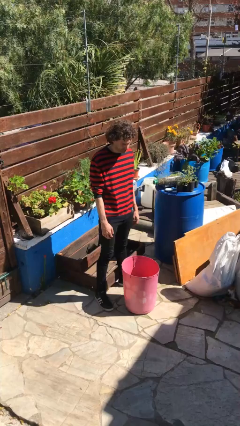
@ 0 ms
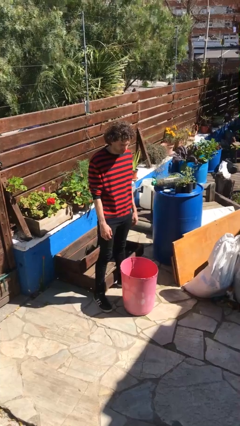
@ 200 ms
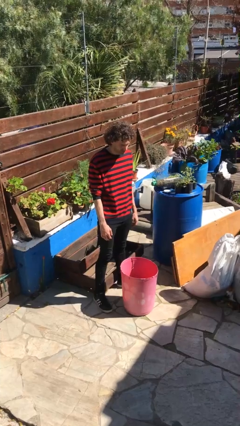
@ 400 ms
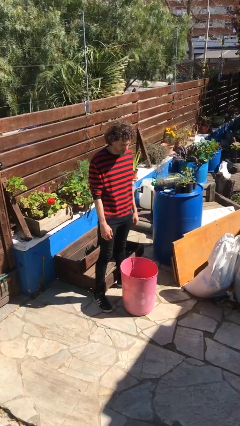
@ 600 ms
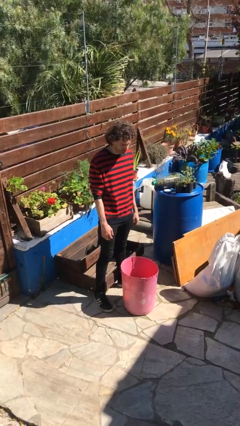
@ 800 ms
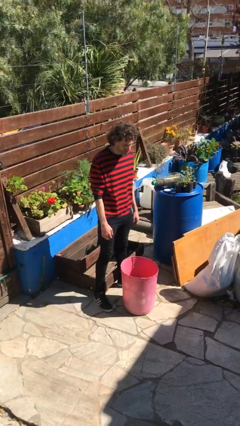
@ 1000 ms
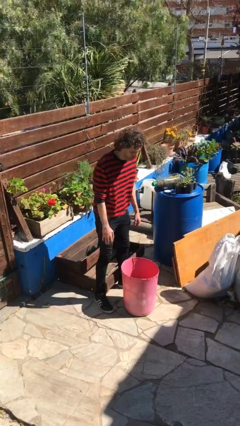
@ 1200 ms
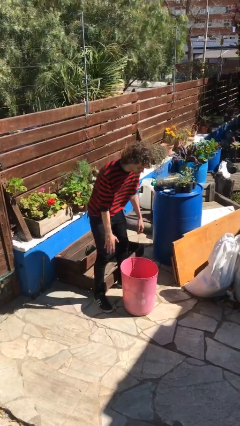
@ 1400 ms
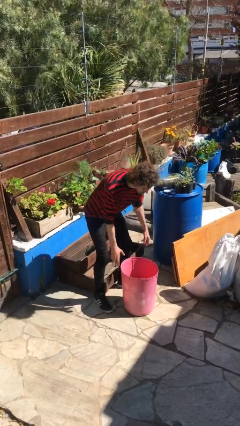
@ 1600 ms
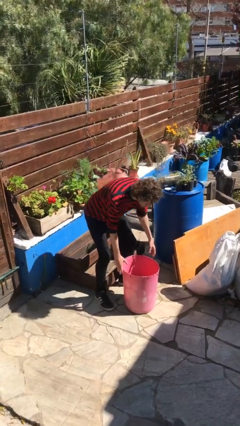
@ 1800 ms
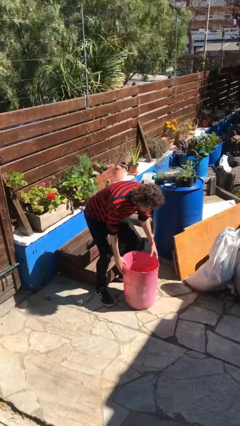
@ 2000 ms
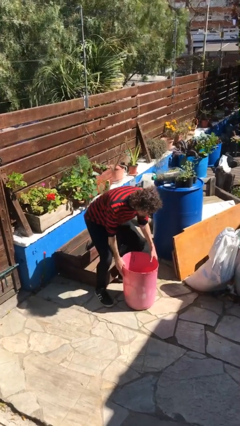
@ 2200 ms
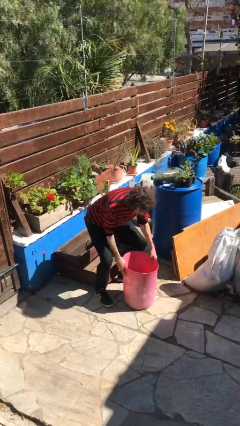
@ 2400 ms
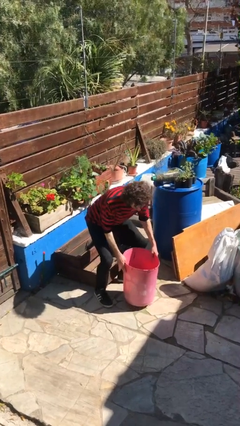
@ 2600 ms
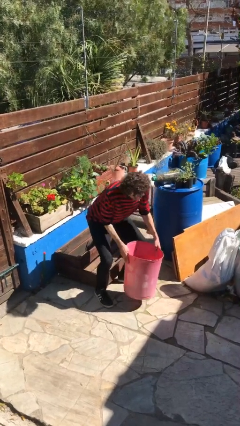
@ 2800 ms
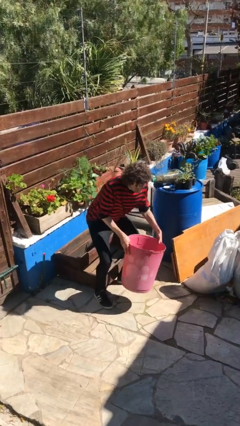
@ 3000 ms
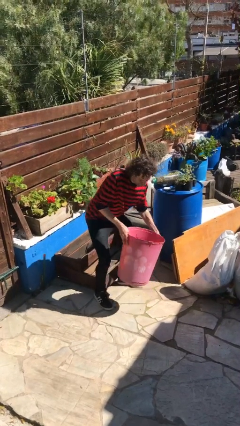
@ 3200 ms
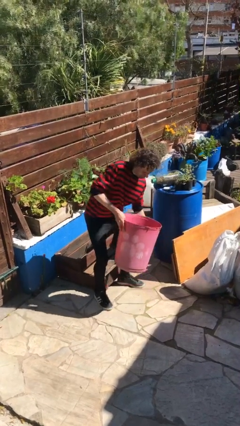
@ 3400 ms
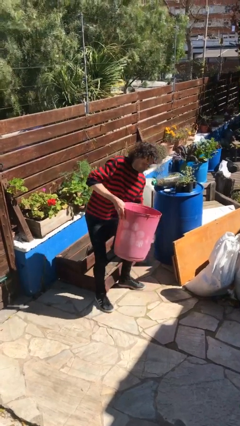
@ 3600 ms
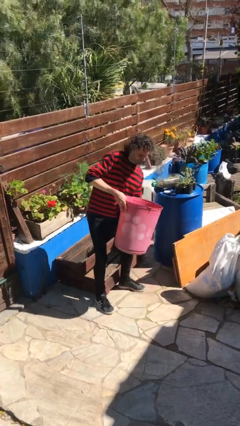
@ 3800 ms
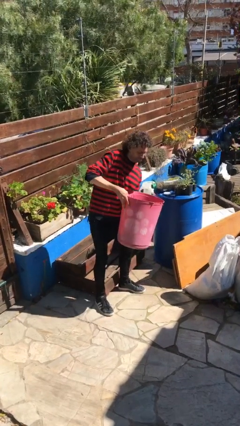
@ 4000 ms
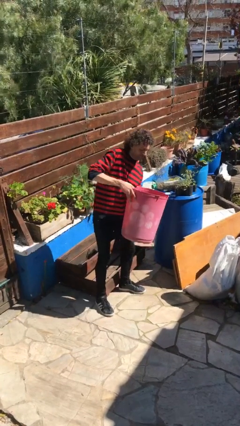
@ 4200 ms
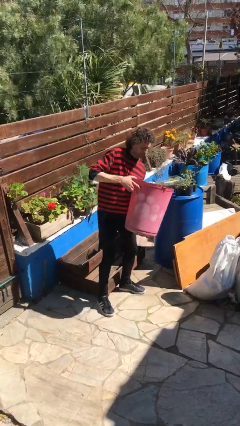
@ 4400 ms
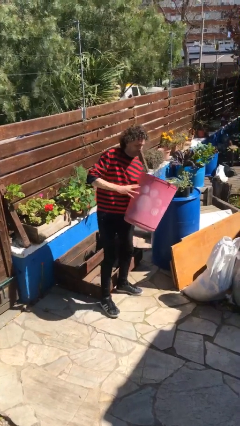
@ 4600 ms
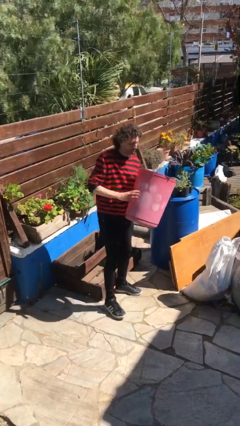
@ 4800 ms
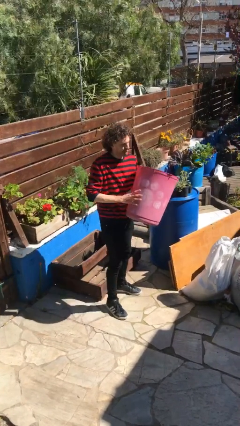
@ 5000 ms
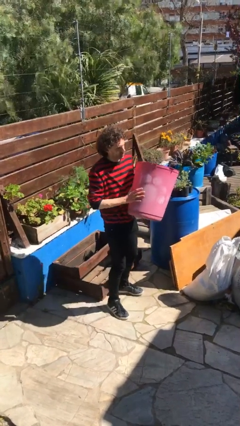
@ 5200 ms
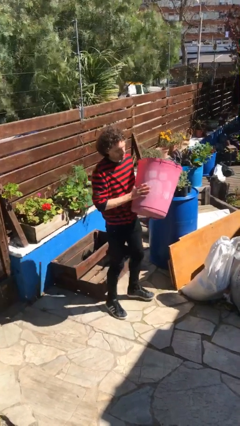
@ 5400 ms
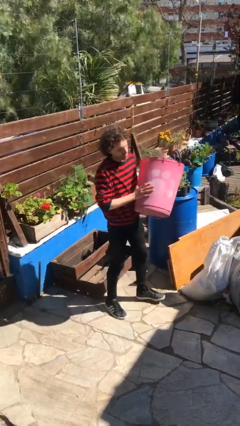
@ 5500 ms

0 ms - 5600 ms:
person picks up object from floor

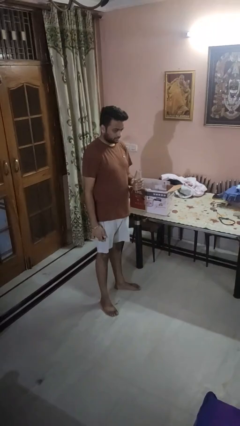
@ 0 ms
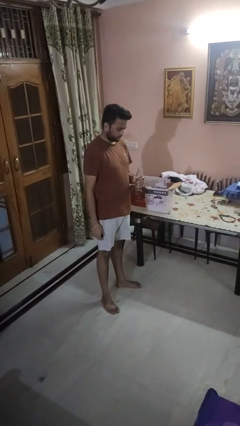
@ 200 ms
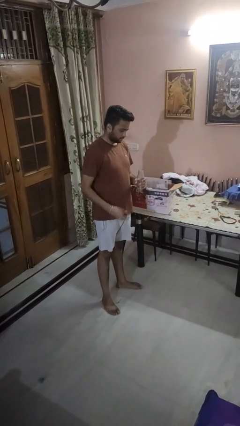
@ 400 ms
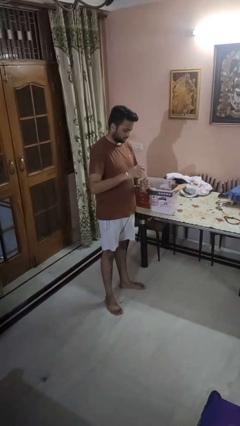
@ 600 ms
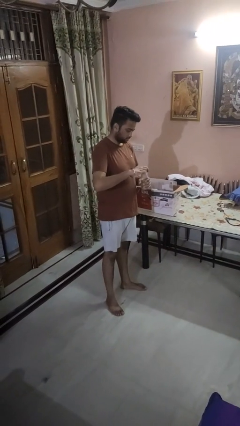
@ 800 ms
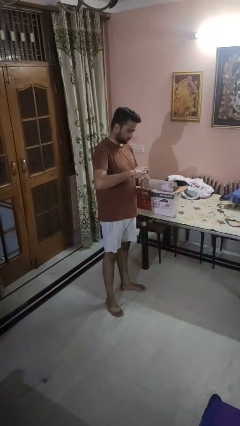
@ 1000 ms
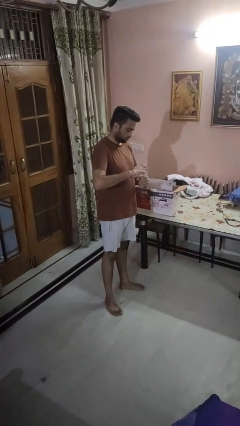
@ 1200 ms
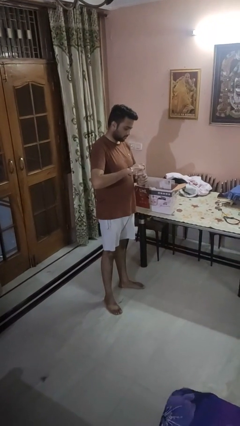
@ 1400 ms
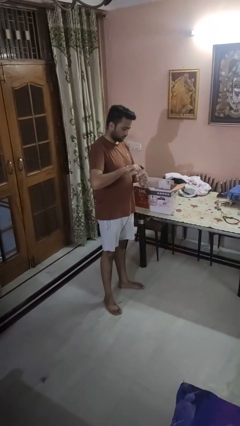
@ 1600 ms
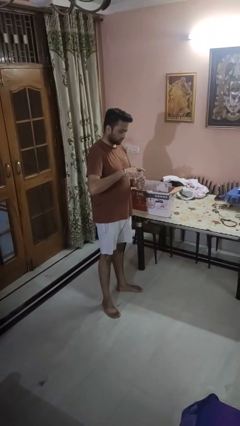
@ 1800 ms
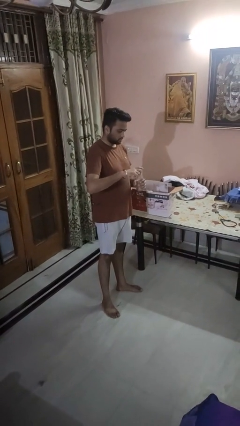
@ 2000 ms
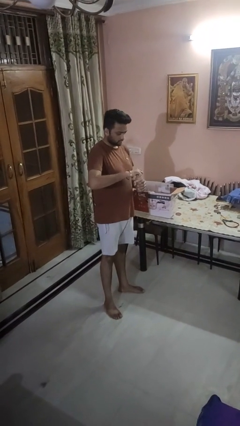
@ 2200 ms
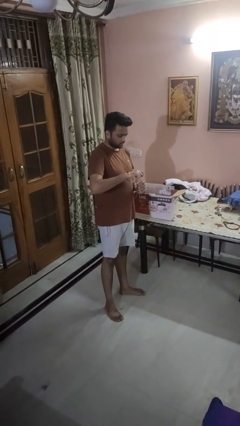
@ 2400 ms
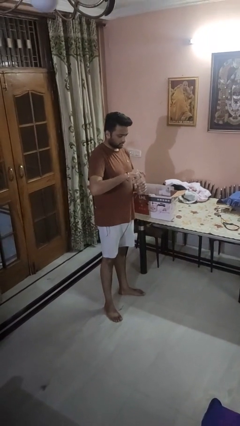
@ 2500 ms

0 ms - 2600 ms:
person screws lid to bottle

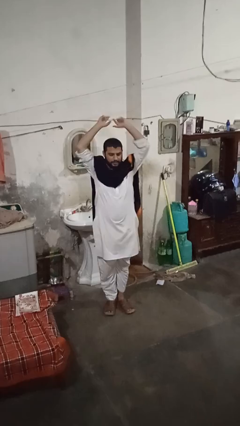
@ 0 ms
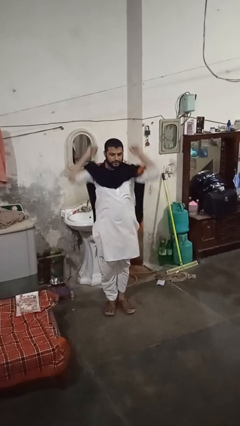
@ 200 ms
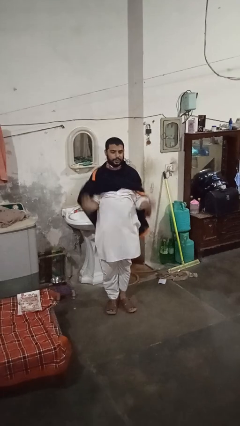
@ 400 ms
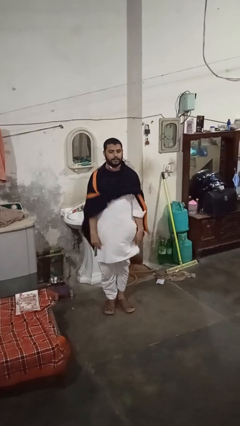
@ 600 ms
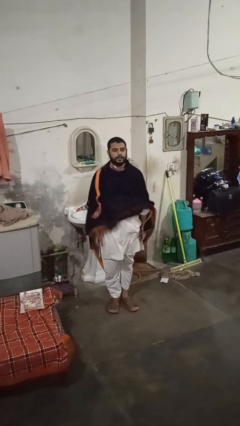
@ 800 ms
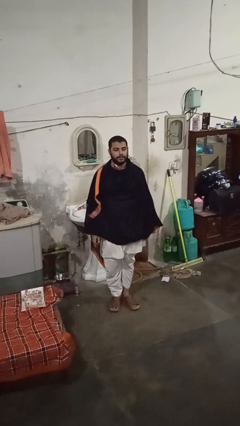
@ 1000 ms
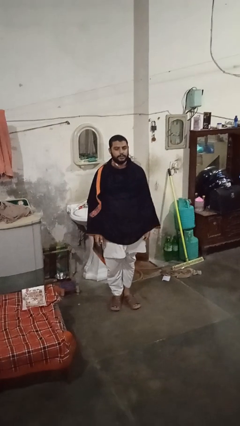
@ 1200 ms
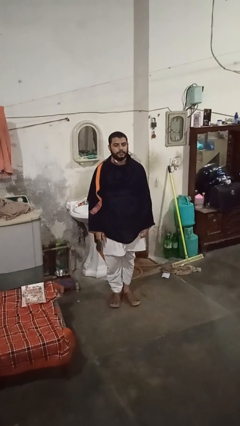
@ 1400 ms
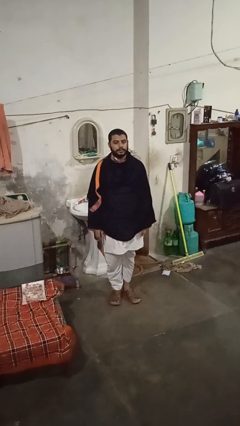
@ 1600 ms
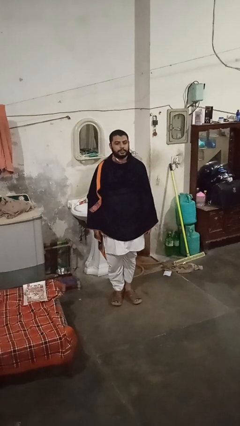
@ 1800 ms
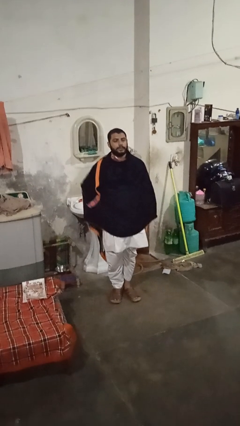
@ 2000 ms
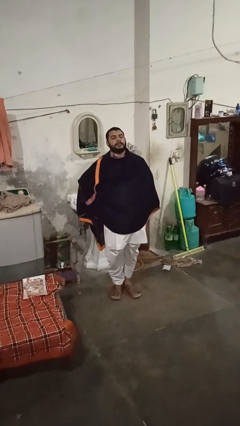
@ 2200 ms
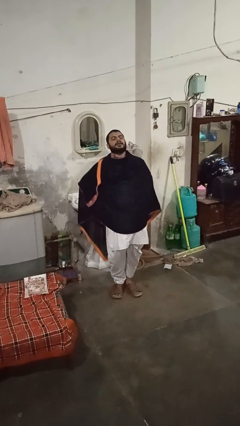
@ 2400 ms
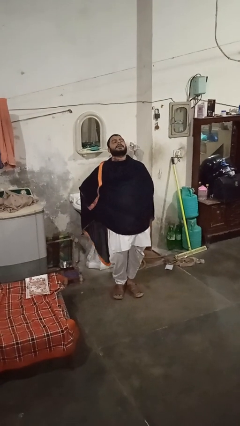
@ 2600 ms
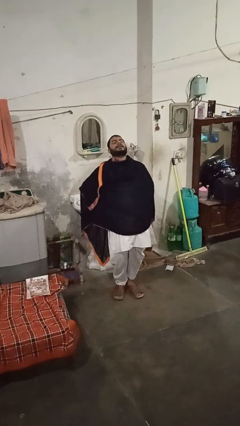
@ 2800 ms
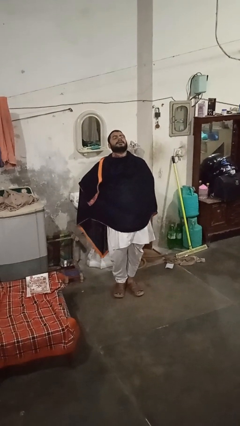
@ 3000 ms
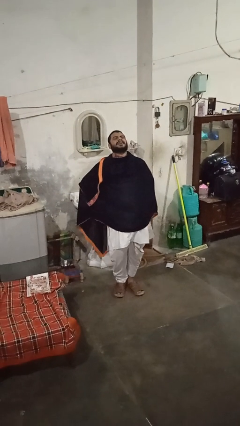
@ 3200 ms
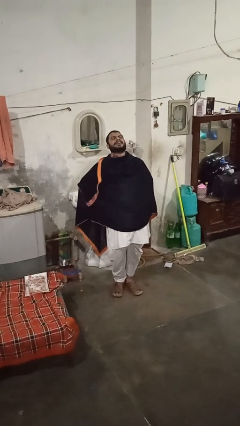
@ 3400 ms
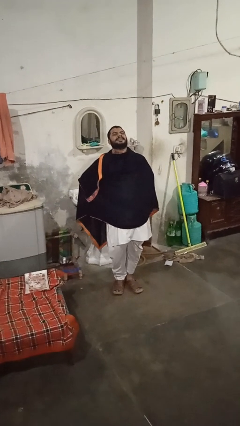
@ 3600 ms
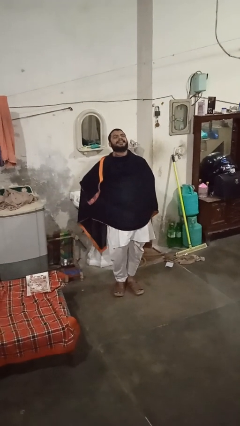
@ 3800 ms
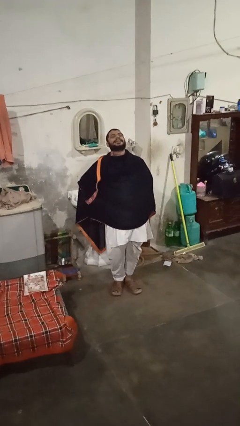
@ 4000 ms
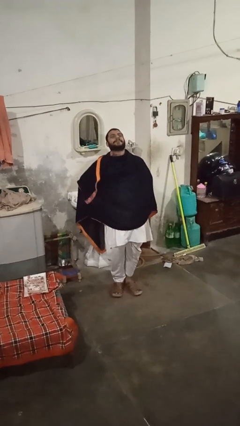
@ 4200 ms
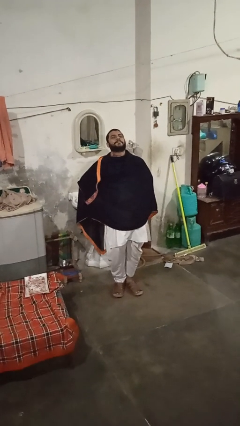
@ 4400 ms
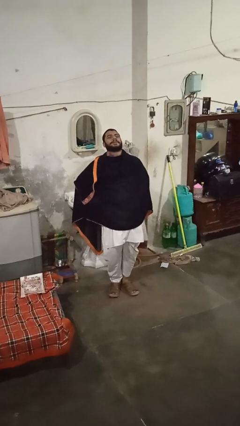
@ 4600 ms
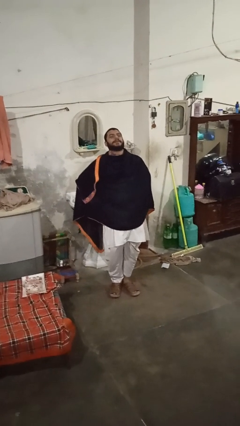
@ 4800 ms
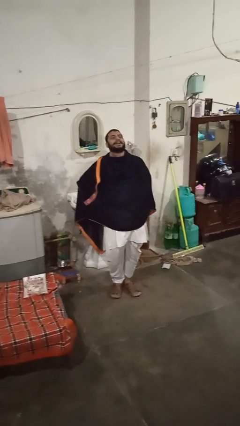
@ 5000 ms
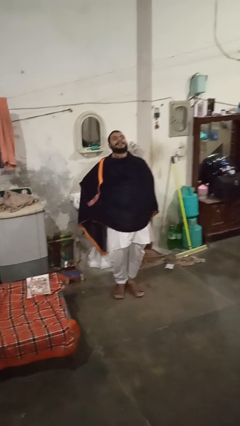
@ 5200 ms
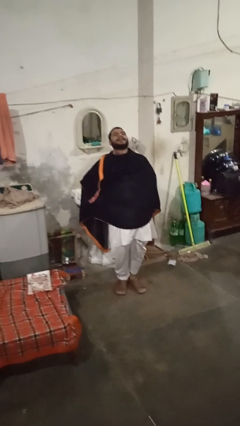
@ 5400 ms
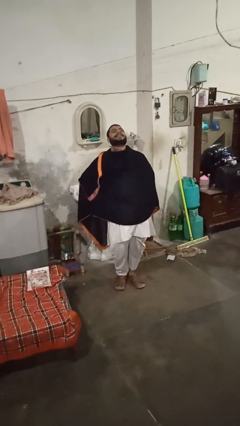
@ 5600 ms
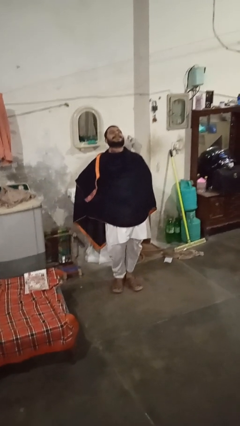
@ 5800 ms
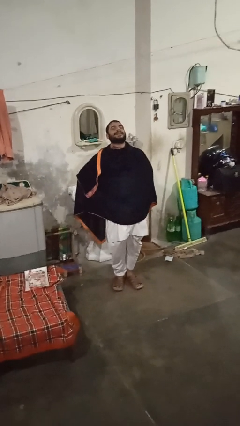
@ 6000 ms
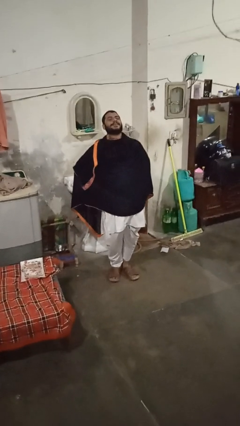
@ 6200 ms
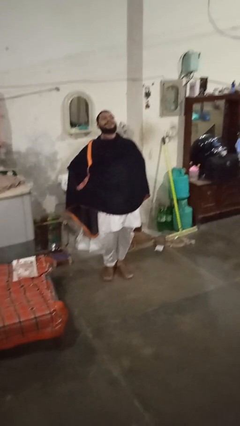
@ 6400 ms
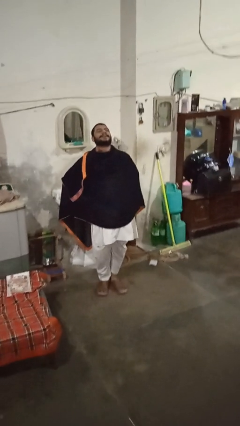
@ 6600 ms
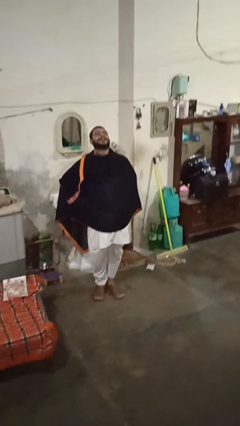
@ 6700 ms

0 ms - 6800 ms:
person stretches back

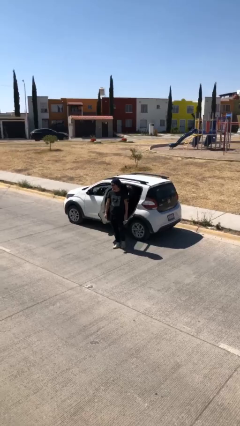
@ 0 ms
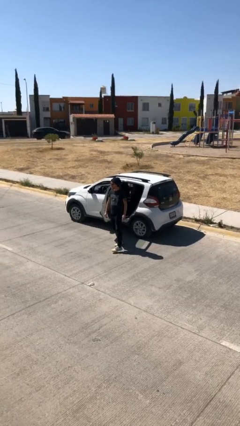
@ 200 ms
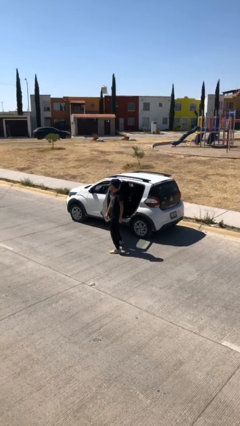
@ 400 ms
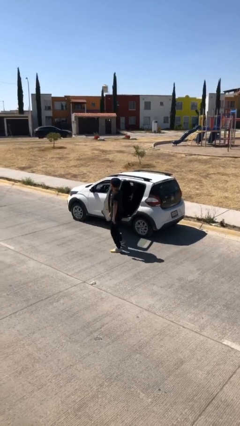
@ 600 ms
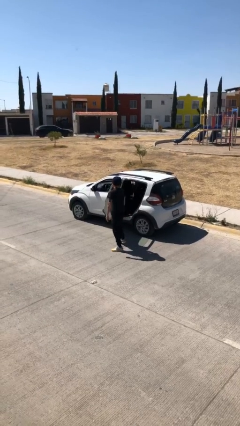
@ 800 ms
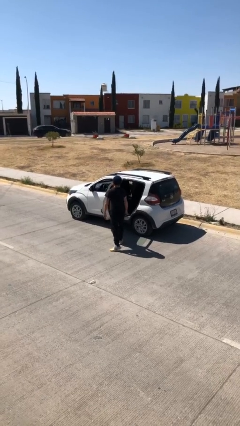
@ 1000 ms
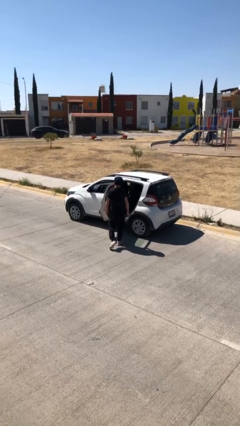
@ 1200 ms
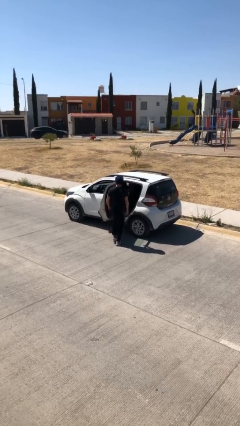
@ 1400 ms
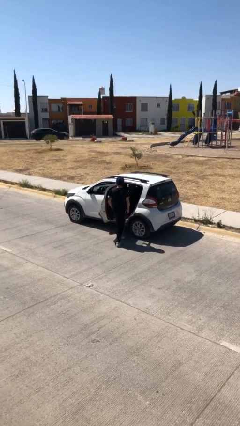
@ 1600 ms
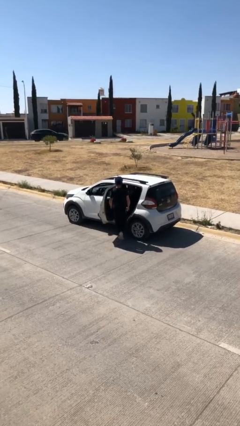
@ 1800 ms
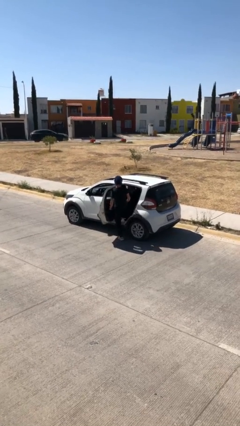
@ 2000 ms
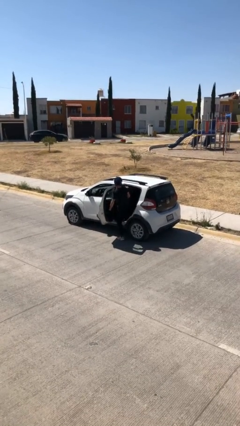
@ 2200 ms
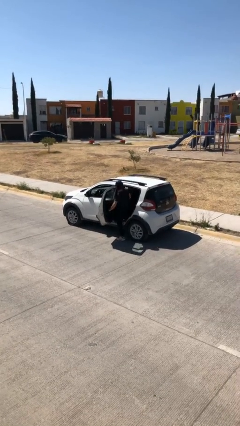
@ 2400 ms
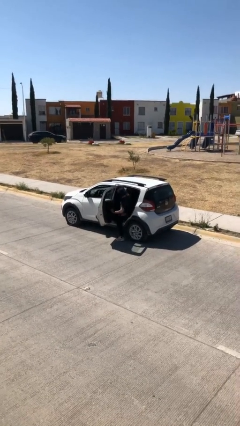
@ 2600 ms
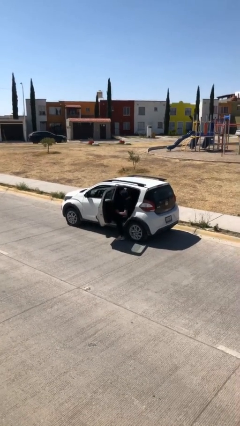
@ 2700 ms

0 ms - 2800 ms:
person enters car

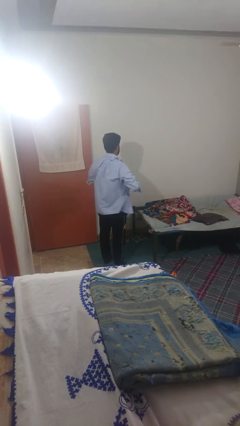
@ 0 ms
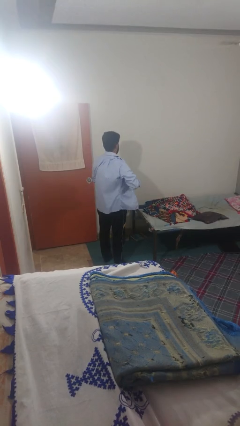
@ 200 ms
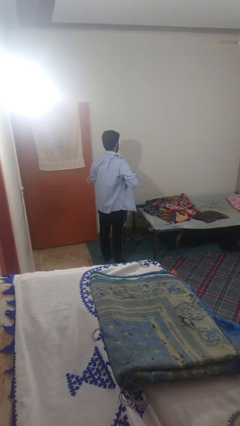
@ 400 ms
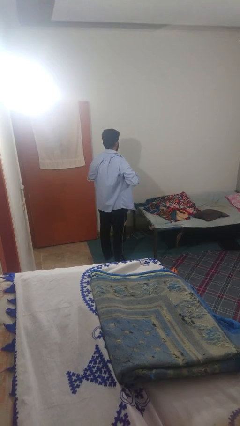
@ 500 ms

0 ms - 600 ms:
person takes off shirt
